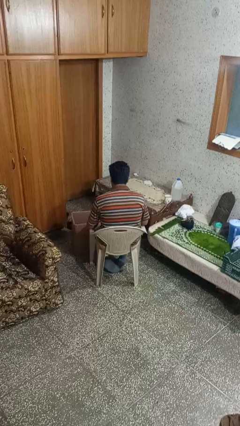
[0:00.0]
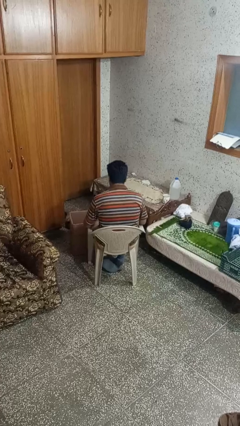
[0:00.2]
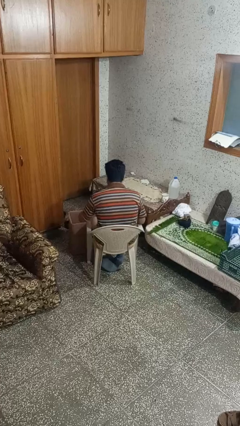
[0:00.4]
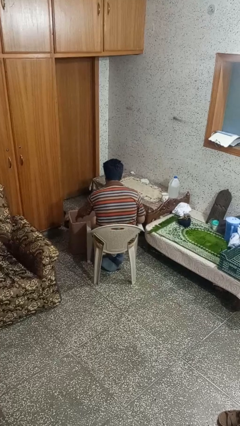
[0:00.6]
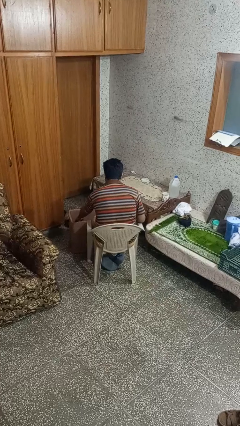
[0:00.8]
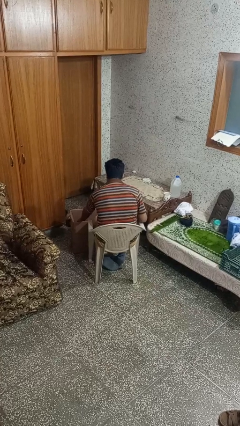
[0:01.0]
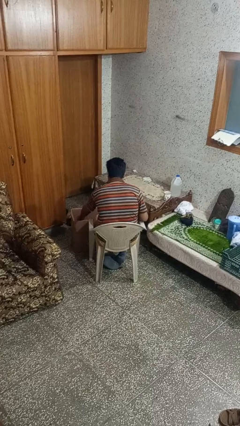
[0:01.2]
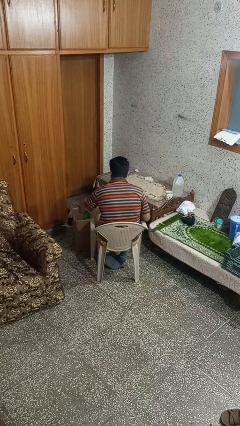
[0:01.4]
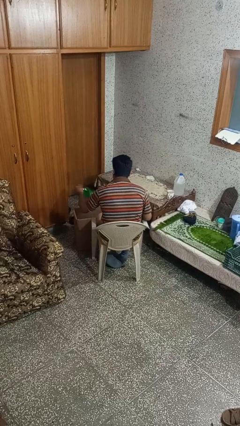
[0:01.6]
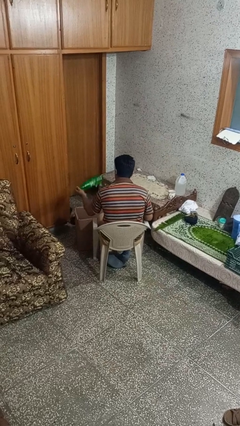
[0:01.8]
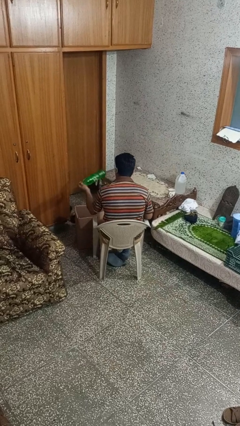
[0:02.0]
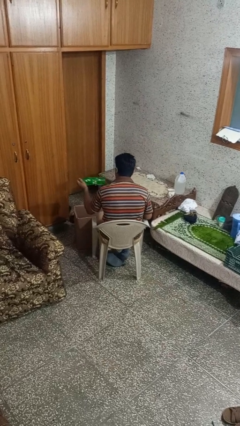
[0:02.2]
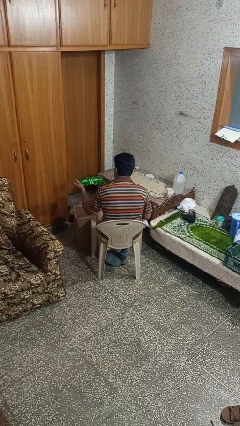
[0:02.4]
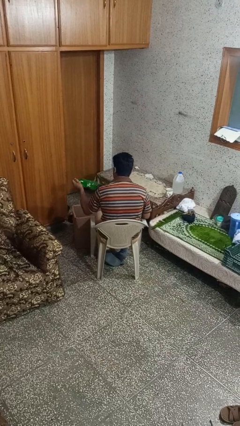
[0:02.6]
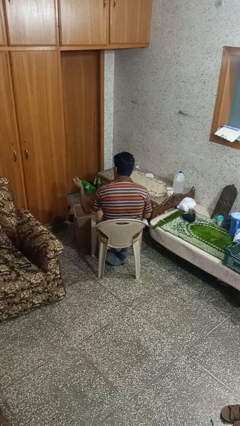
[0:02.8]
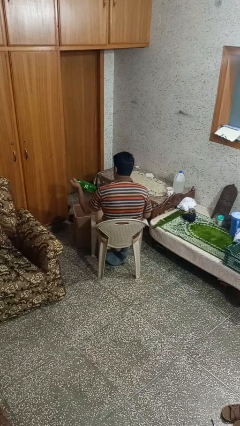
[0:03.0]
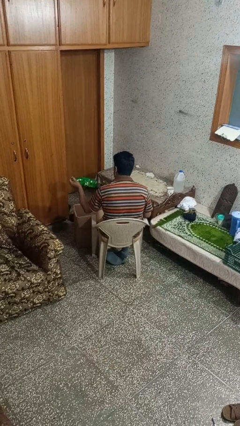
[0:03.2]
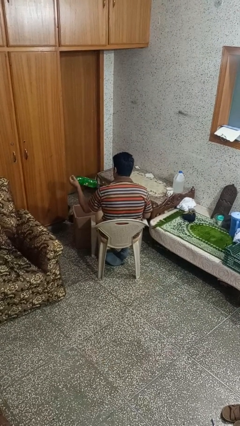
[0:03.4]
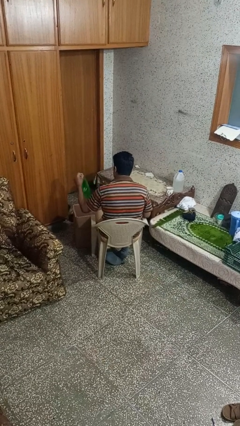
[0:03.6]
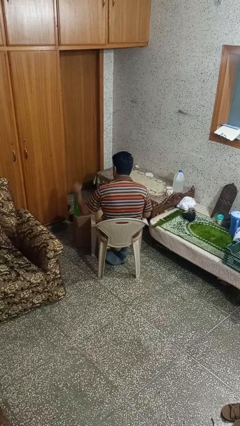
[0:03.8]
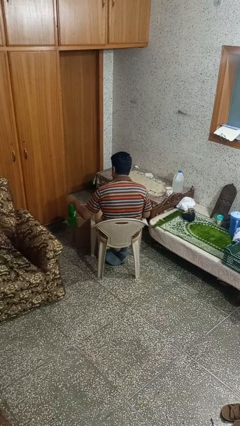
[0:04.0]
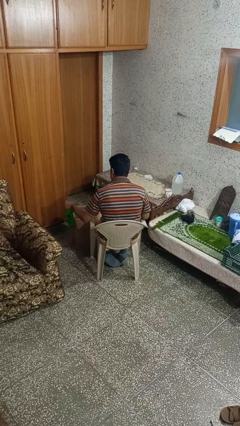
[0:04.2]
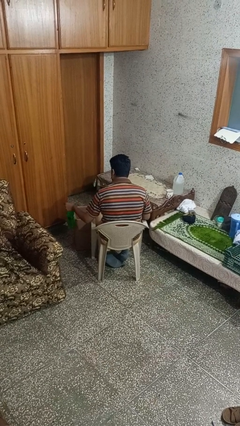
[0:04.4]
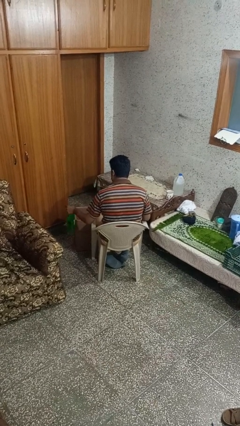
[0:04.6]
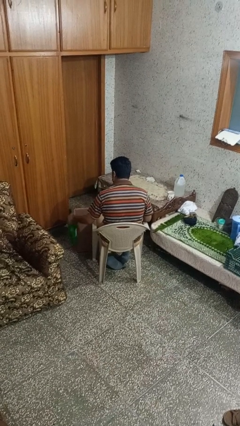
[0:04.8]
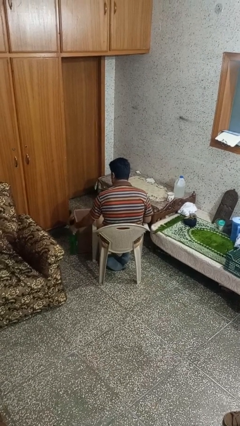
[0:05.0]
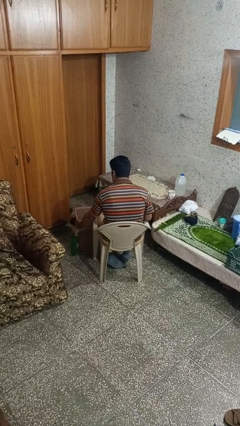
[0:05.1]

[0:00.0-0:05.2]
person takes object from box

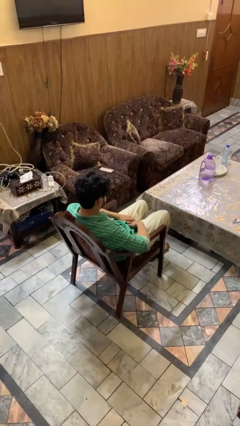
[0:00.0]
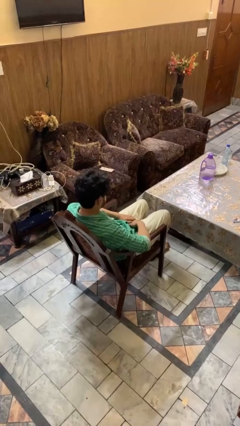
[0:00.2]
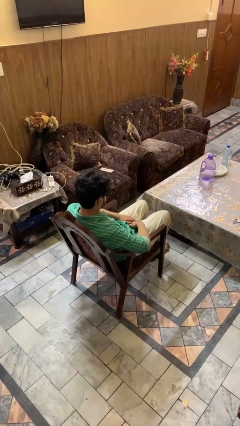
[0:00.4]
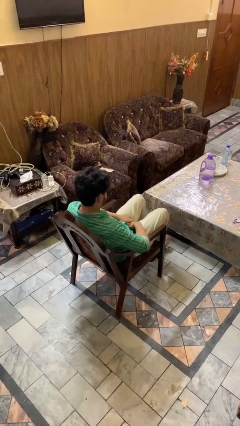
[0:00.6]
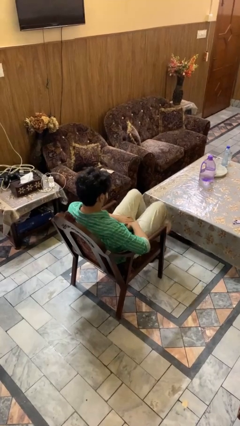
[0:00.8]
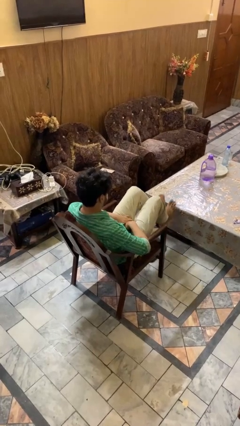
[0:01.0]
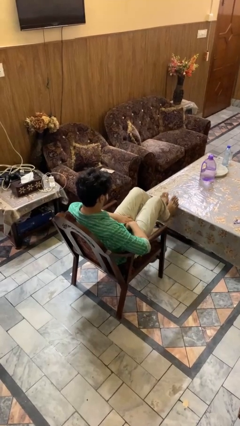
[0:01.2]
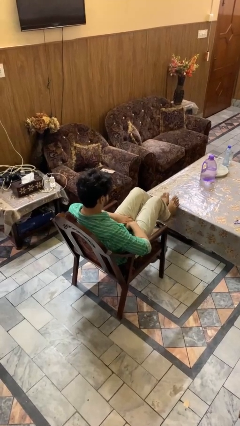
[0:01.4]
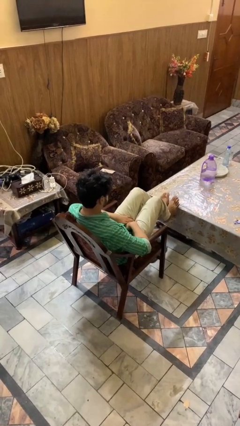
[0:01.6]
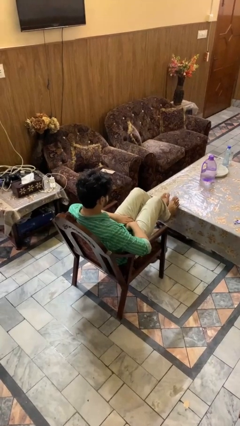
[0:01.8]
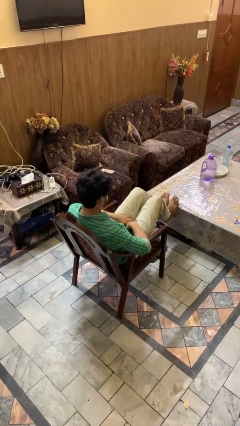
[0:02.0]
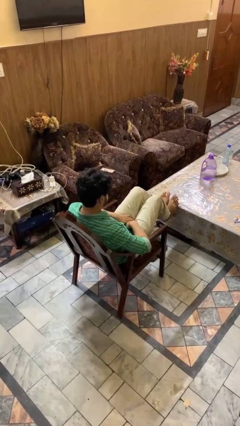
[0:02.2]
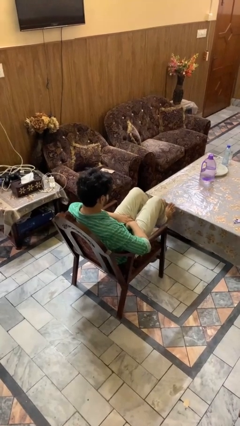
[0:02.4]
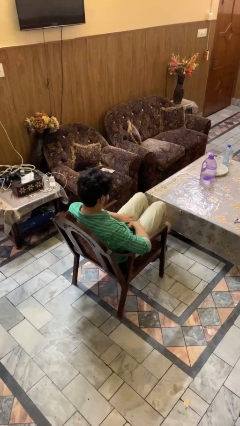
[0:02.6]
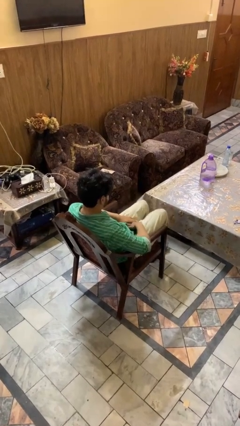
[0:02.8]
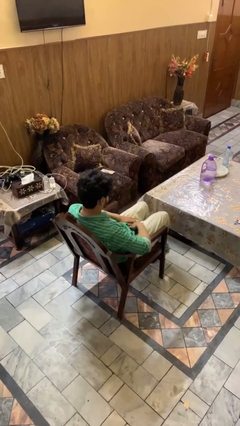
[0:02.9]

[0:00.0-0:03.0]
person puts feet up

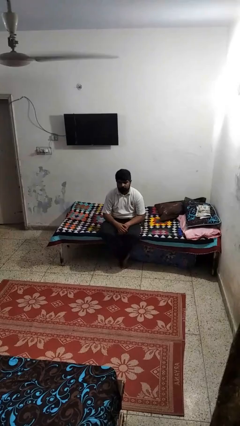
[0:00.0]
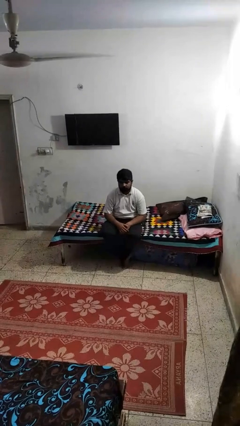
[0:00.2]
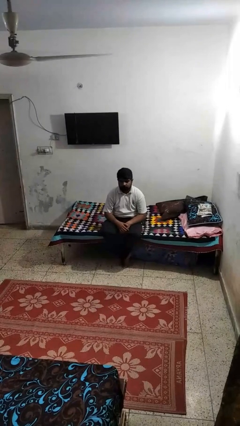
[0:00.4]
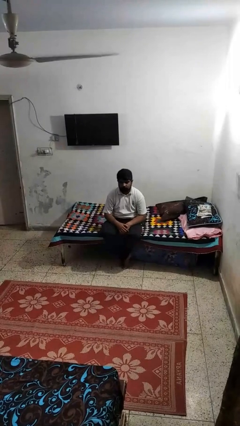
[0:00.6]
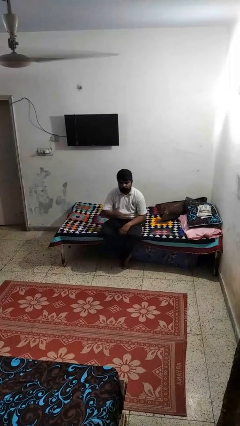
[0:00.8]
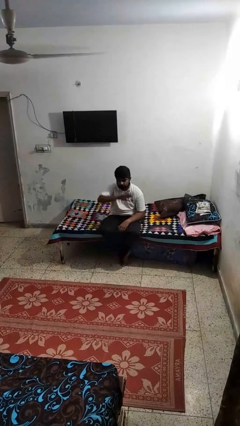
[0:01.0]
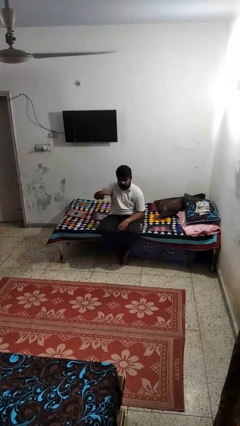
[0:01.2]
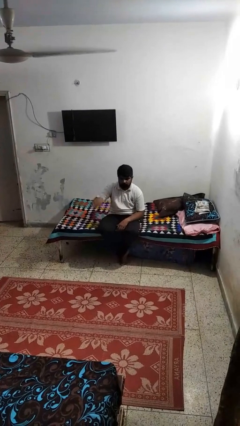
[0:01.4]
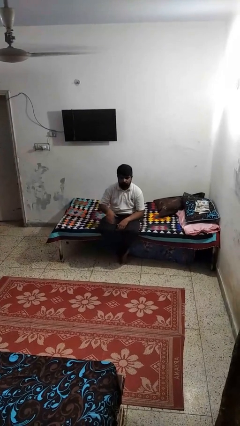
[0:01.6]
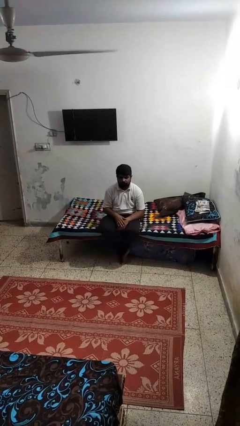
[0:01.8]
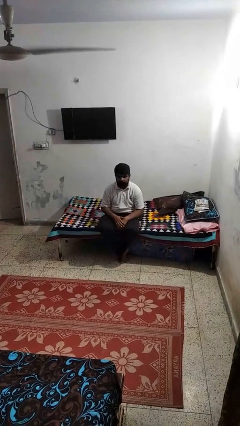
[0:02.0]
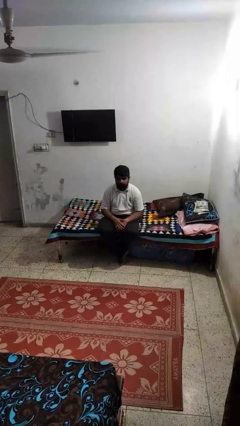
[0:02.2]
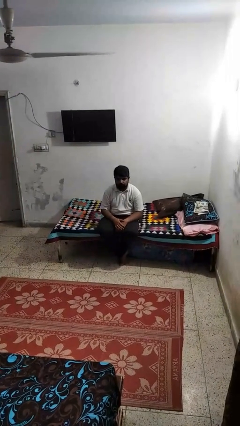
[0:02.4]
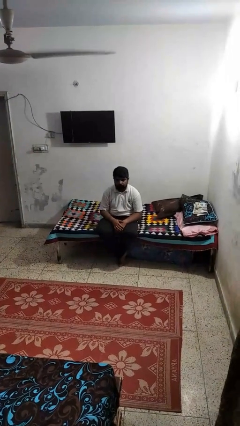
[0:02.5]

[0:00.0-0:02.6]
person gestures swipe right

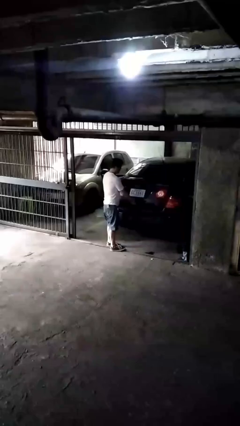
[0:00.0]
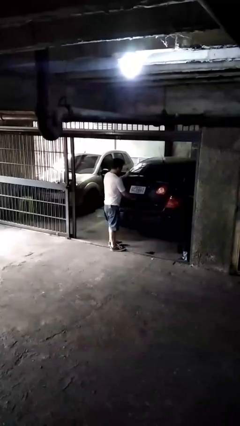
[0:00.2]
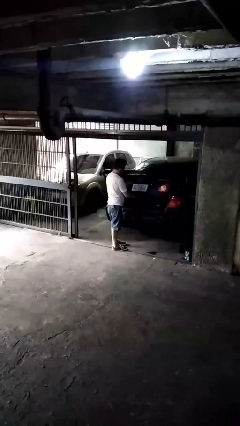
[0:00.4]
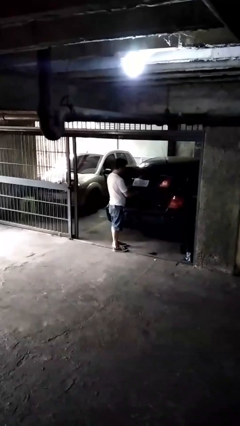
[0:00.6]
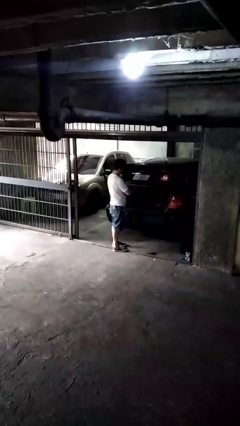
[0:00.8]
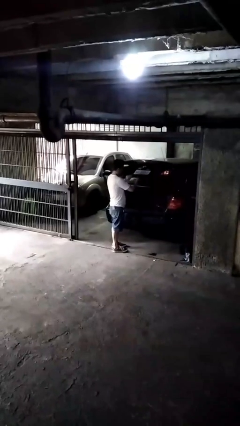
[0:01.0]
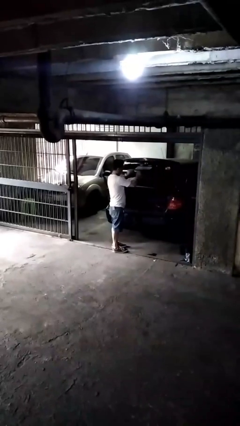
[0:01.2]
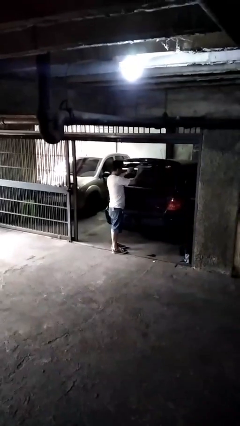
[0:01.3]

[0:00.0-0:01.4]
person opens car trunk

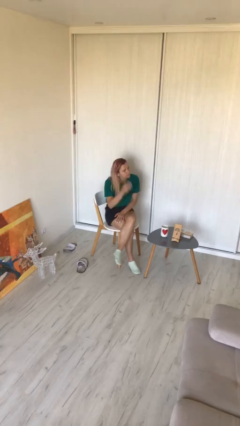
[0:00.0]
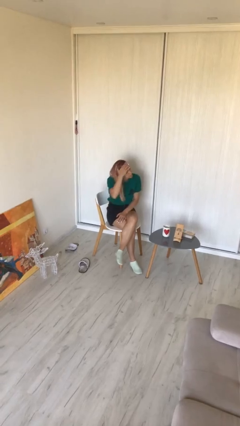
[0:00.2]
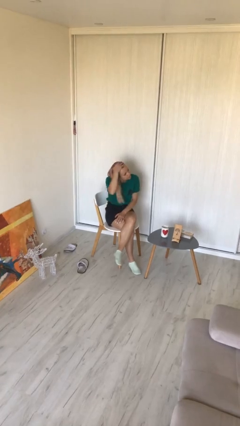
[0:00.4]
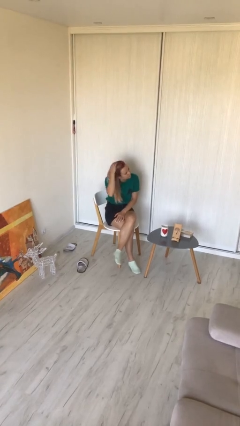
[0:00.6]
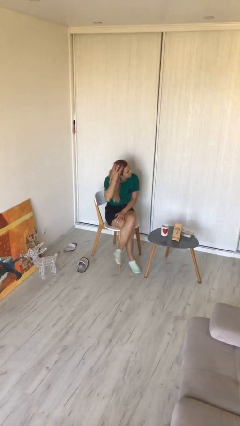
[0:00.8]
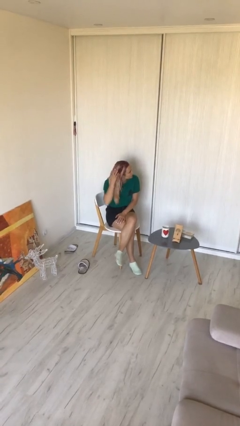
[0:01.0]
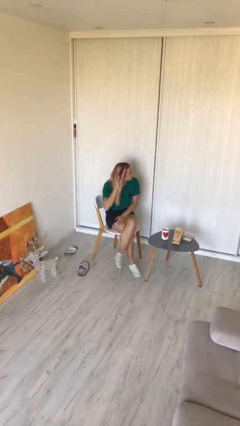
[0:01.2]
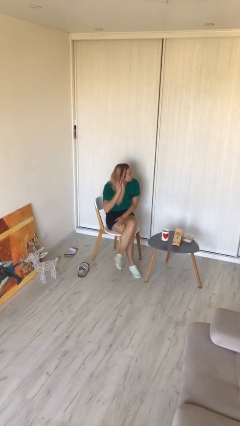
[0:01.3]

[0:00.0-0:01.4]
person strokes hair

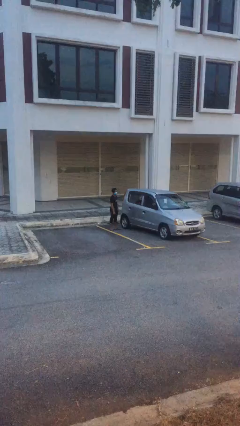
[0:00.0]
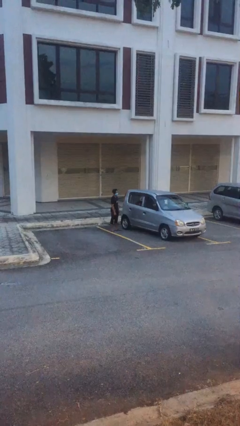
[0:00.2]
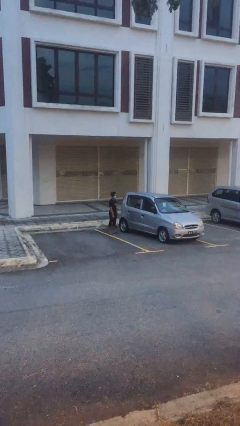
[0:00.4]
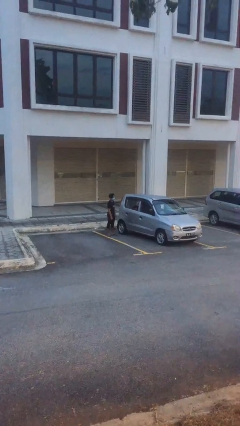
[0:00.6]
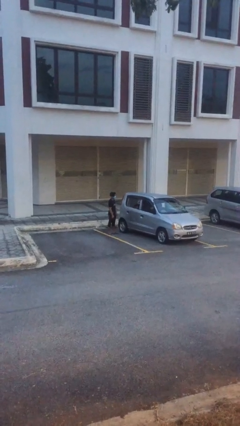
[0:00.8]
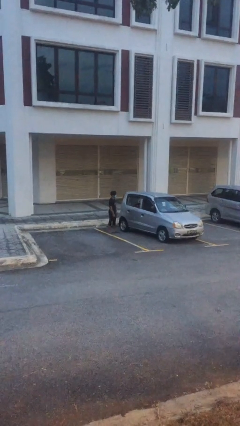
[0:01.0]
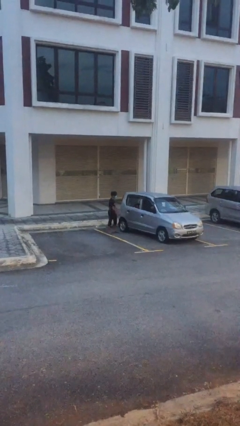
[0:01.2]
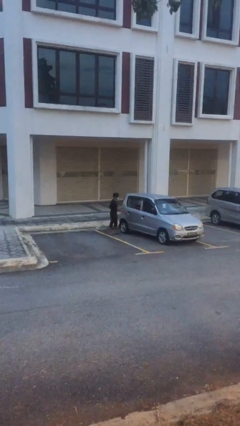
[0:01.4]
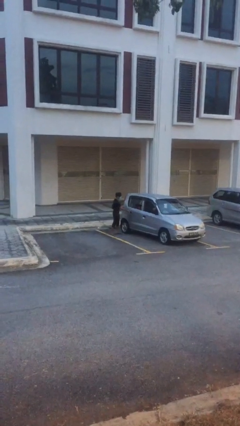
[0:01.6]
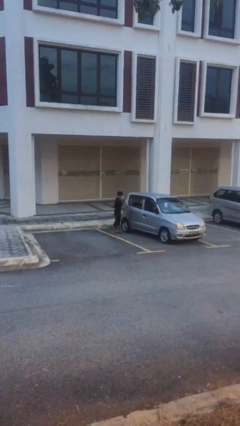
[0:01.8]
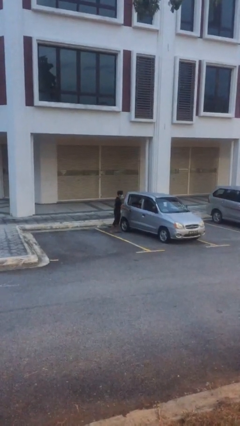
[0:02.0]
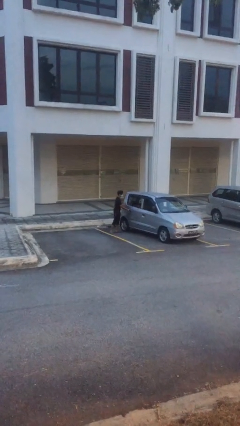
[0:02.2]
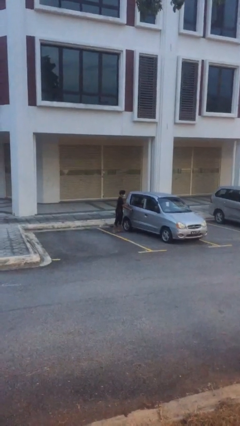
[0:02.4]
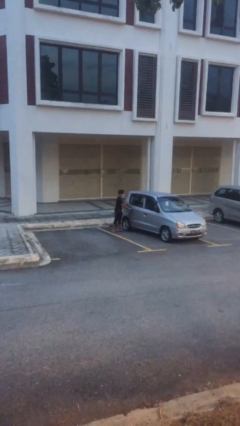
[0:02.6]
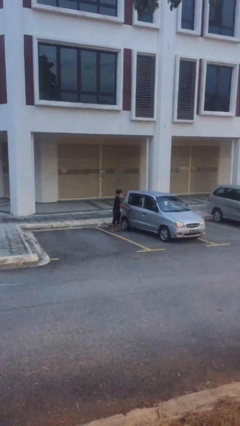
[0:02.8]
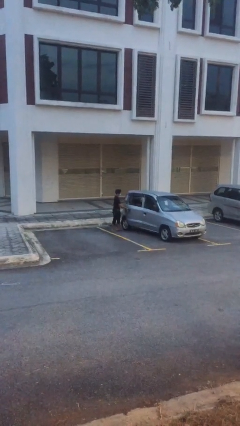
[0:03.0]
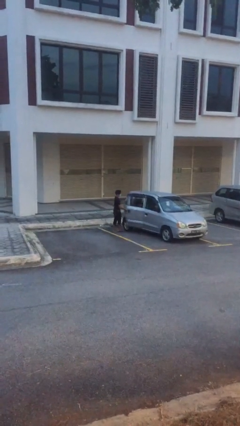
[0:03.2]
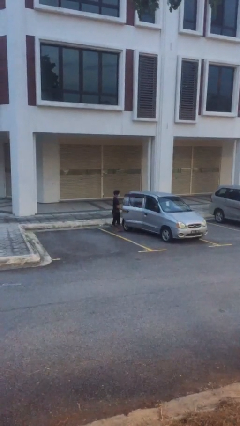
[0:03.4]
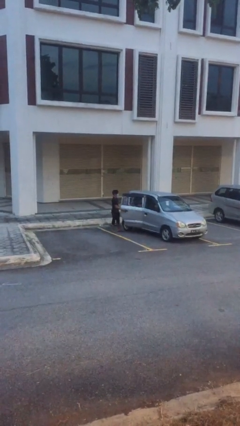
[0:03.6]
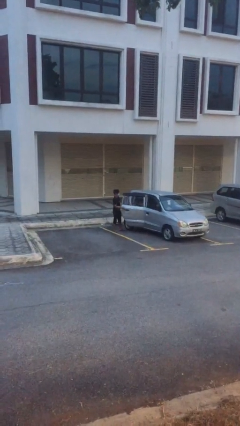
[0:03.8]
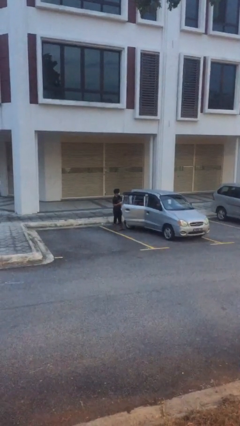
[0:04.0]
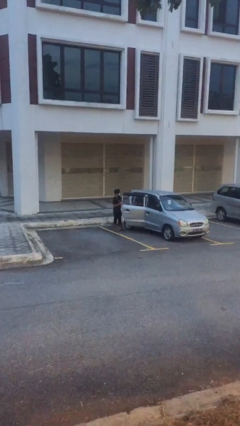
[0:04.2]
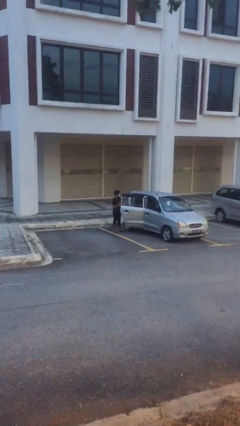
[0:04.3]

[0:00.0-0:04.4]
person opens car door
